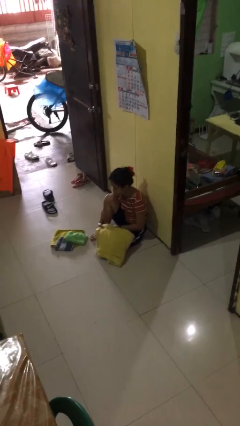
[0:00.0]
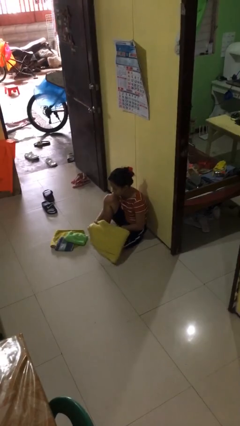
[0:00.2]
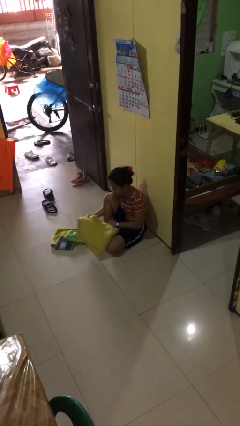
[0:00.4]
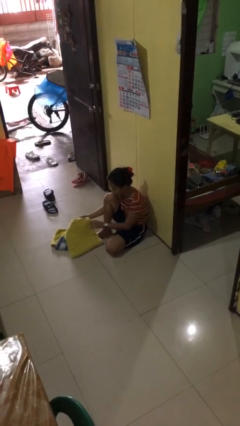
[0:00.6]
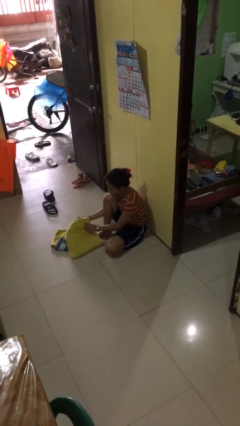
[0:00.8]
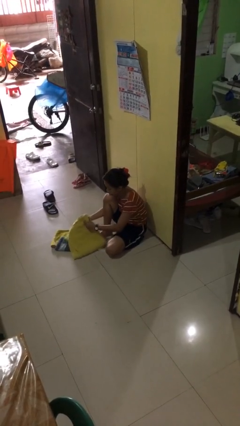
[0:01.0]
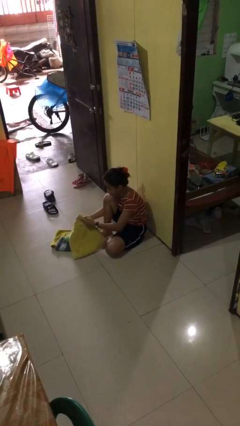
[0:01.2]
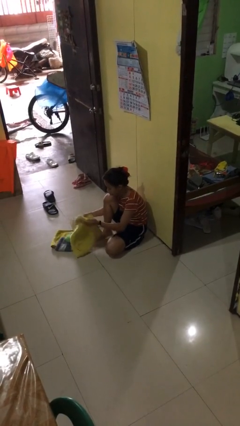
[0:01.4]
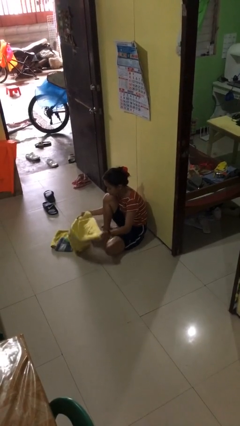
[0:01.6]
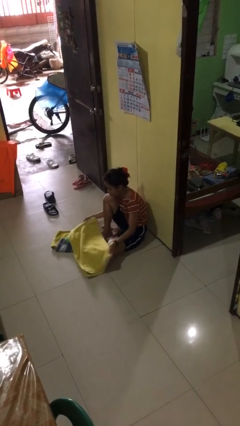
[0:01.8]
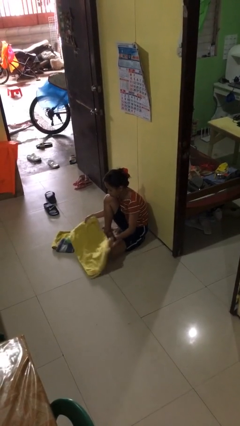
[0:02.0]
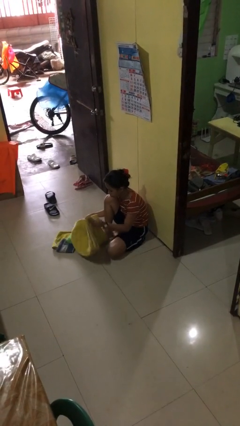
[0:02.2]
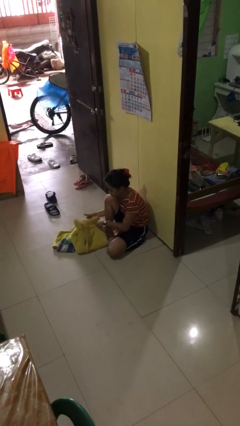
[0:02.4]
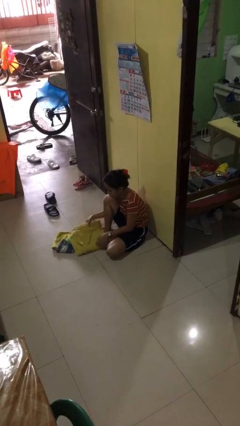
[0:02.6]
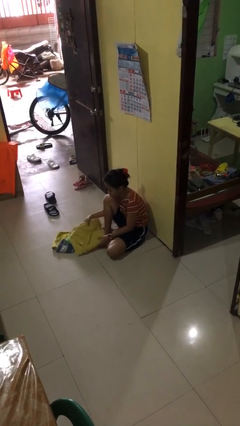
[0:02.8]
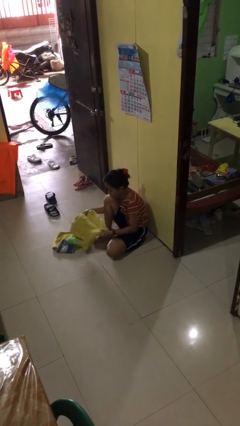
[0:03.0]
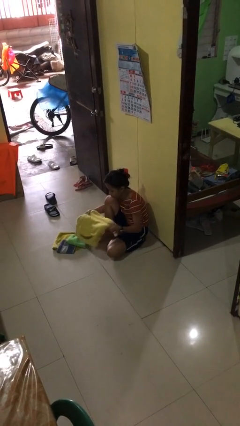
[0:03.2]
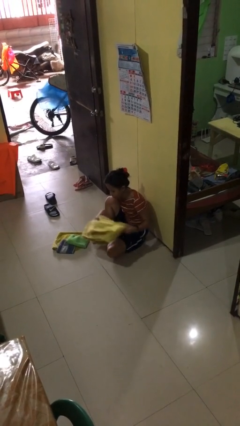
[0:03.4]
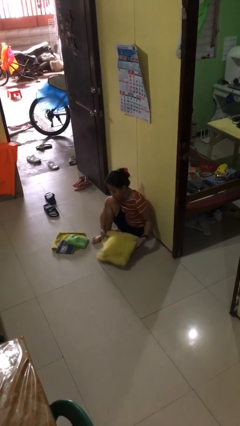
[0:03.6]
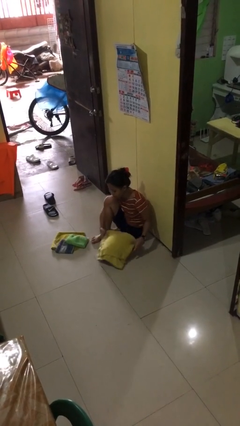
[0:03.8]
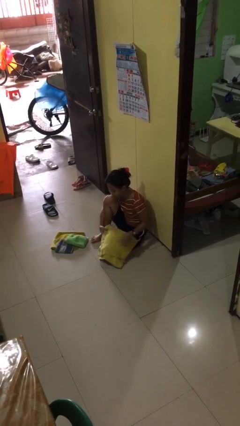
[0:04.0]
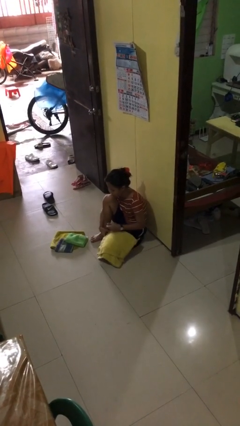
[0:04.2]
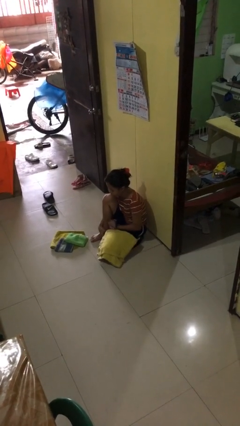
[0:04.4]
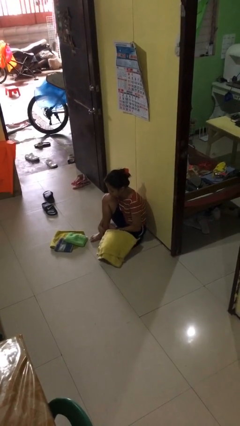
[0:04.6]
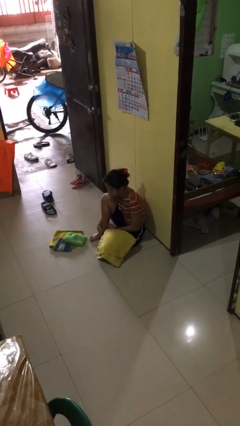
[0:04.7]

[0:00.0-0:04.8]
person folds towel

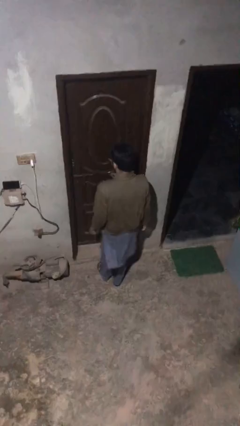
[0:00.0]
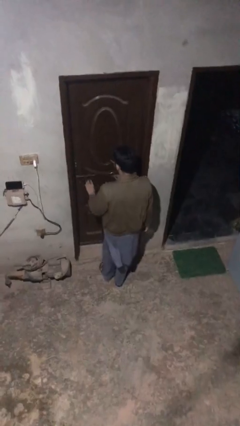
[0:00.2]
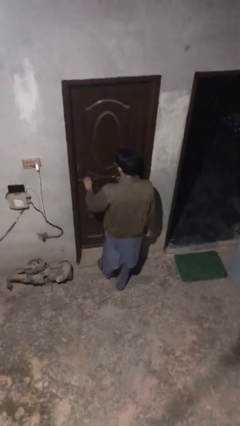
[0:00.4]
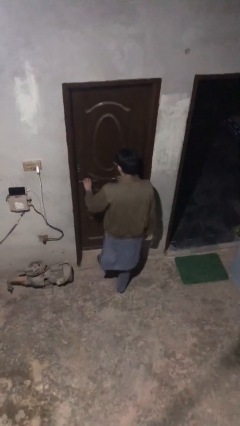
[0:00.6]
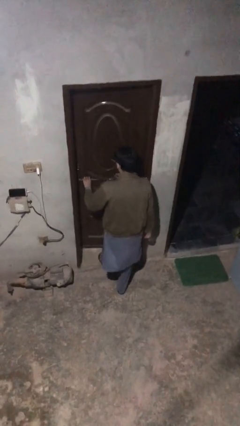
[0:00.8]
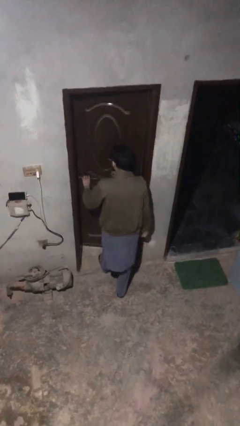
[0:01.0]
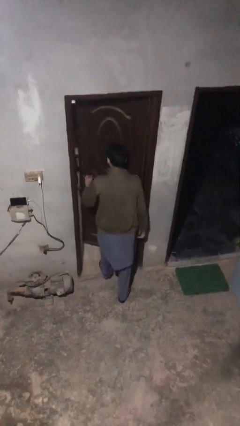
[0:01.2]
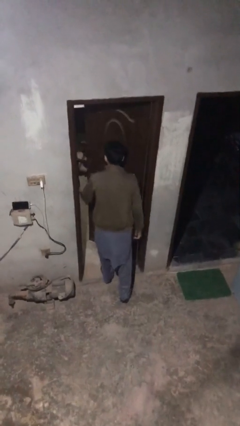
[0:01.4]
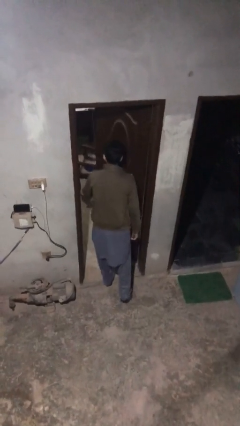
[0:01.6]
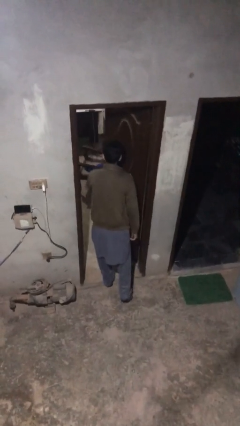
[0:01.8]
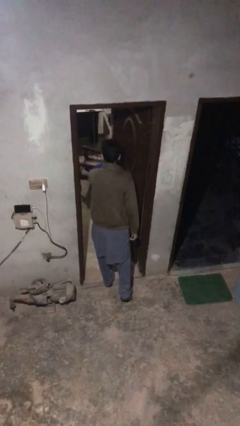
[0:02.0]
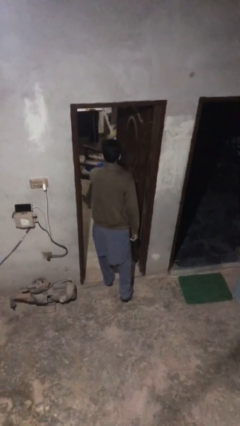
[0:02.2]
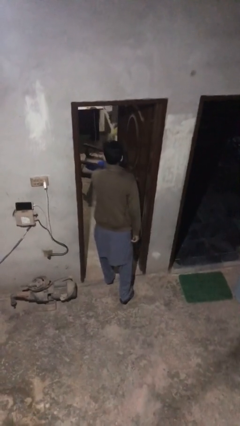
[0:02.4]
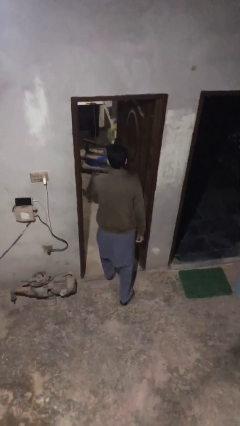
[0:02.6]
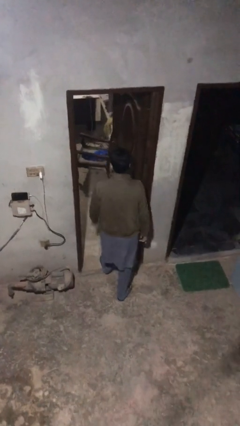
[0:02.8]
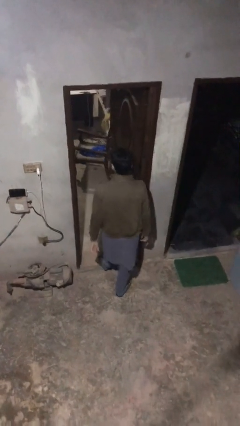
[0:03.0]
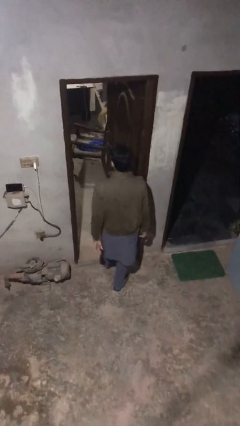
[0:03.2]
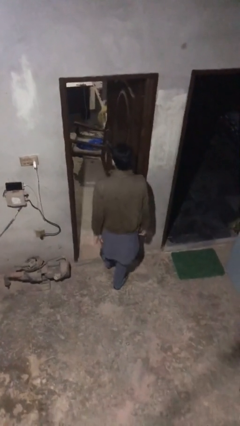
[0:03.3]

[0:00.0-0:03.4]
person opens facility door

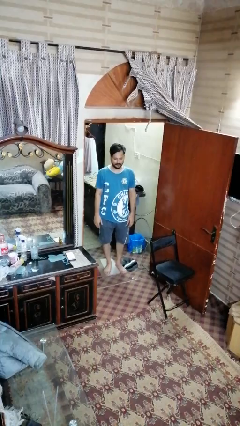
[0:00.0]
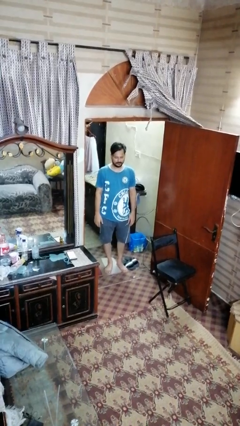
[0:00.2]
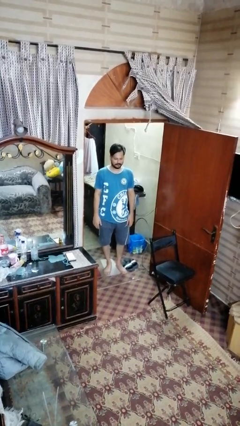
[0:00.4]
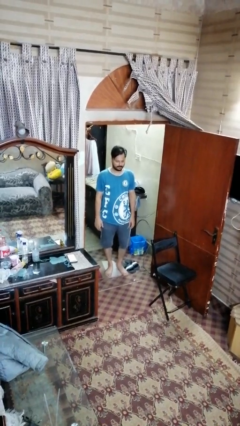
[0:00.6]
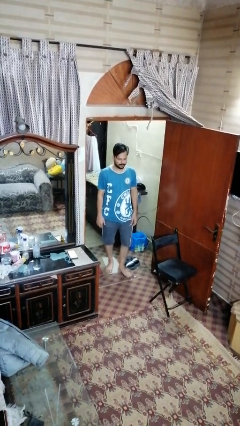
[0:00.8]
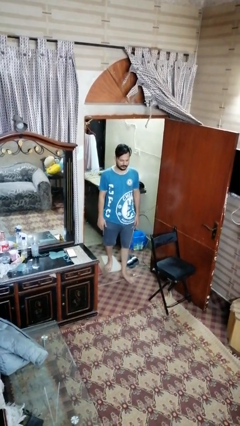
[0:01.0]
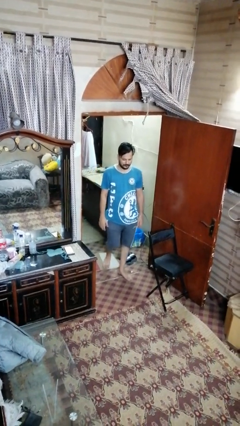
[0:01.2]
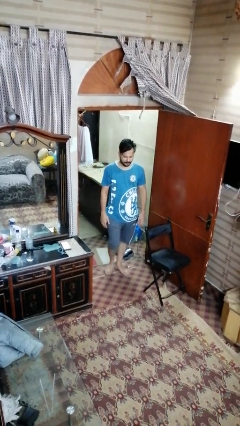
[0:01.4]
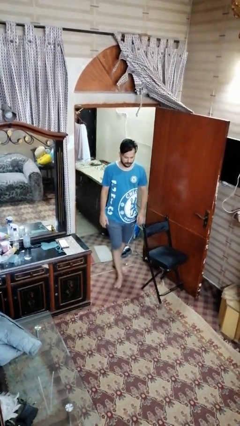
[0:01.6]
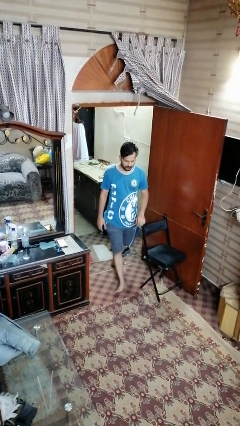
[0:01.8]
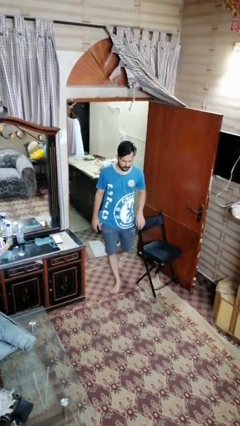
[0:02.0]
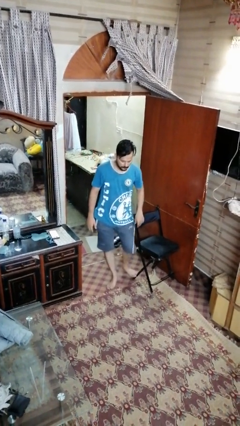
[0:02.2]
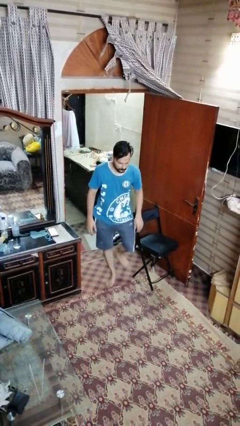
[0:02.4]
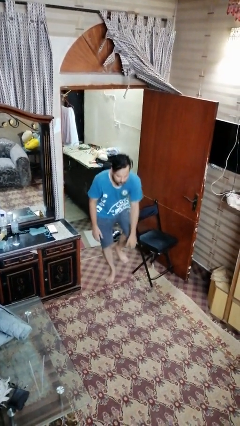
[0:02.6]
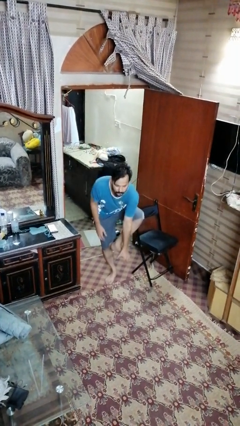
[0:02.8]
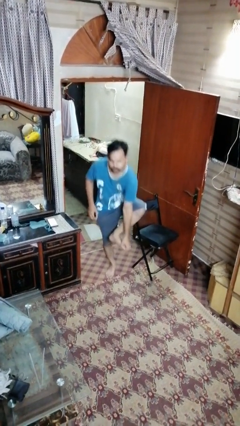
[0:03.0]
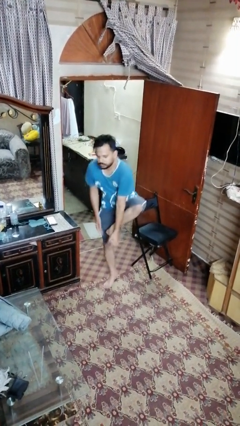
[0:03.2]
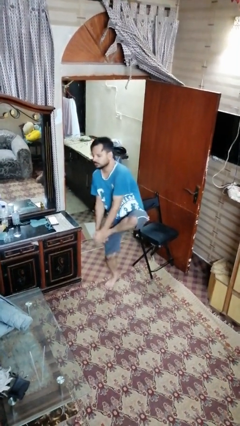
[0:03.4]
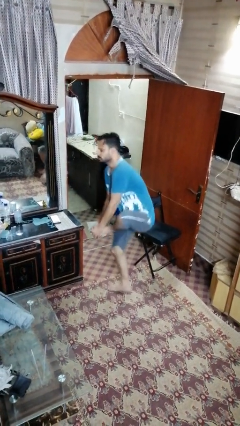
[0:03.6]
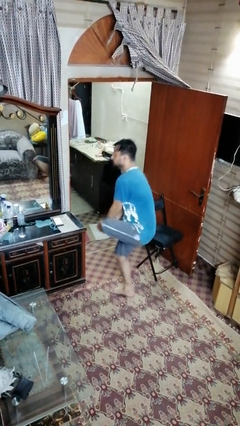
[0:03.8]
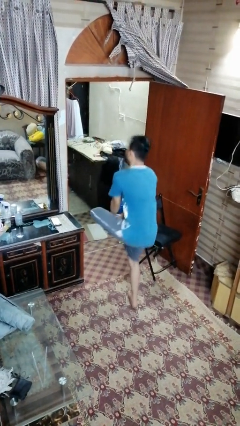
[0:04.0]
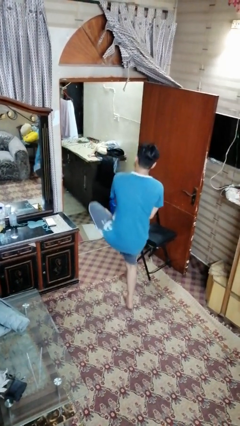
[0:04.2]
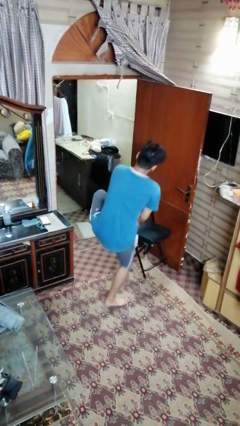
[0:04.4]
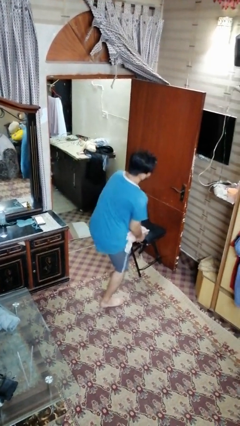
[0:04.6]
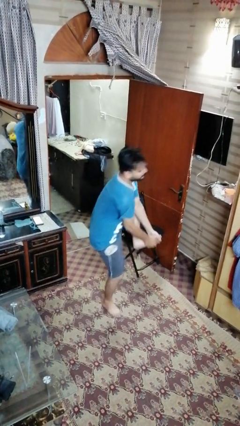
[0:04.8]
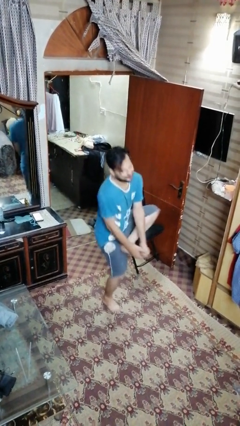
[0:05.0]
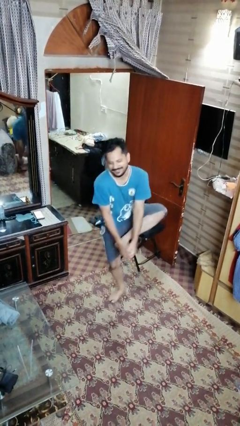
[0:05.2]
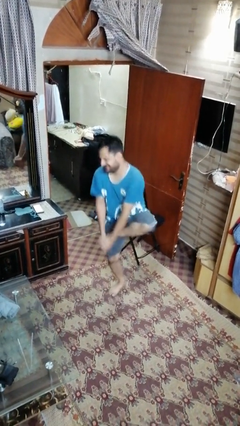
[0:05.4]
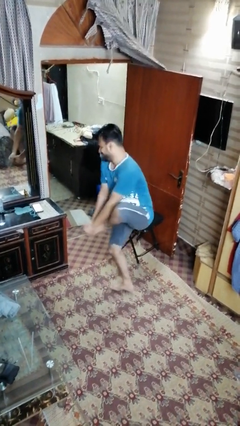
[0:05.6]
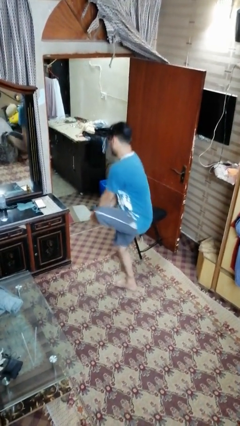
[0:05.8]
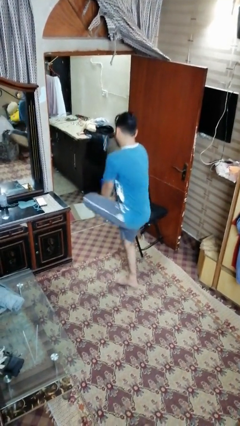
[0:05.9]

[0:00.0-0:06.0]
person trips on object on floor

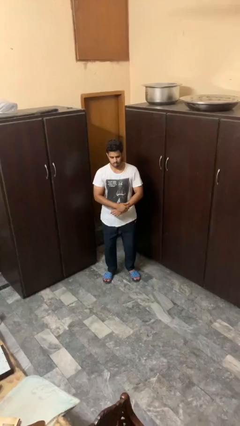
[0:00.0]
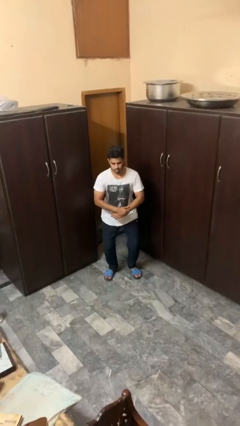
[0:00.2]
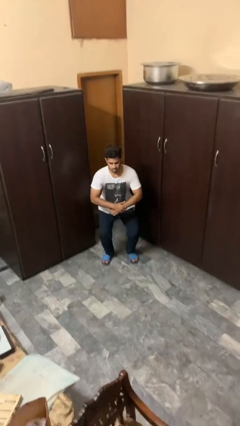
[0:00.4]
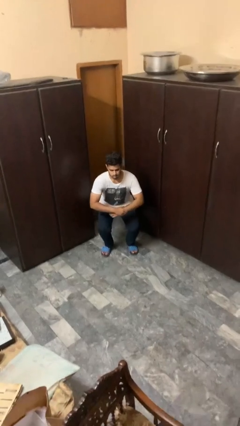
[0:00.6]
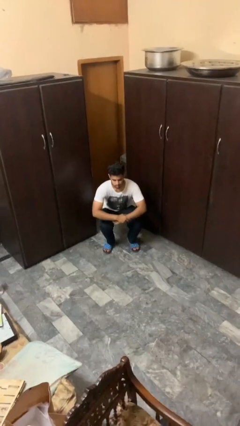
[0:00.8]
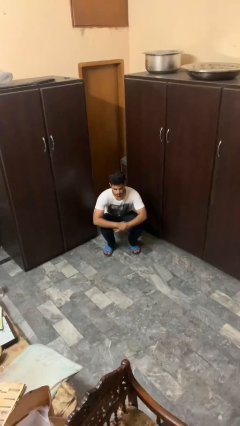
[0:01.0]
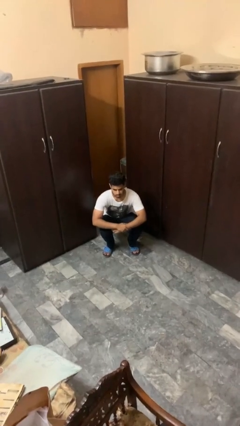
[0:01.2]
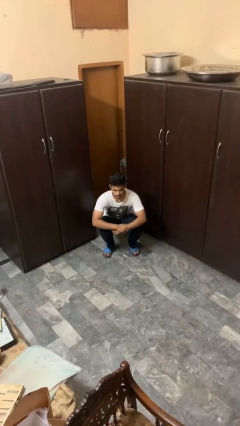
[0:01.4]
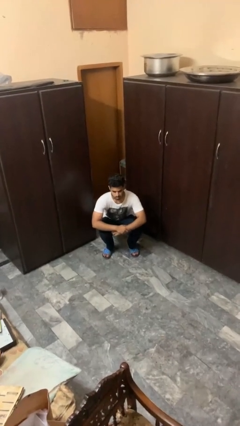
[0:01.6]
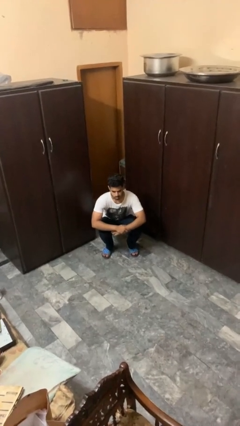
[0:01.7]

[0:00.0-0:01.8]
person squats

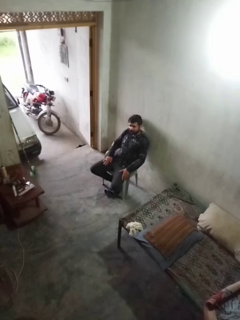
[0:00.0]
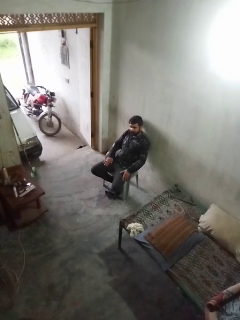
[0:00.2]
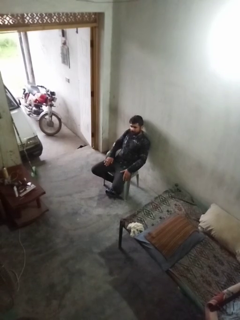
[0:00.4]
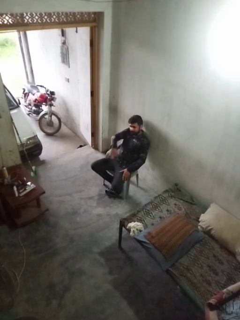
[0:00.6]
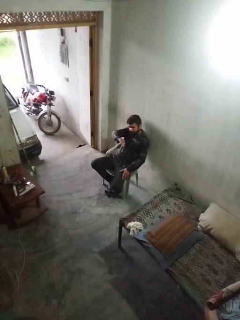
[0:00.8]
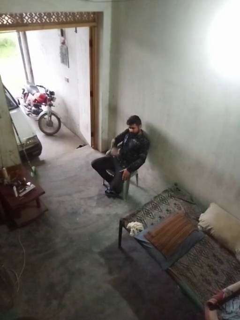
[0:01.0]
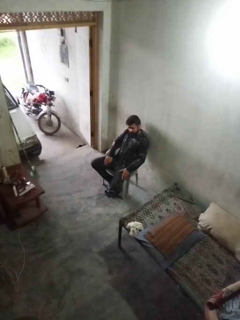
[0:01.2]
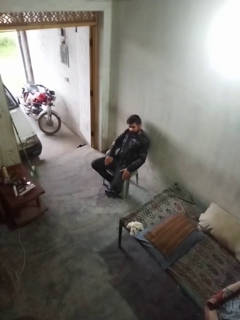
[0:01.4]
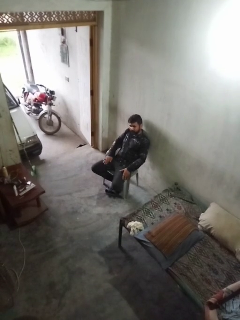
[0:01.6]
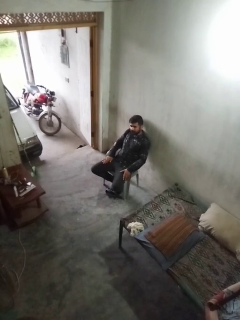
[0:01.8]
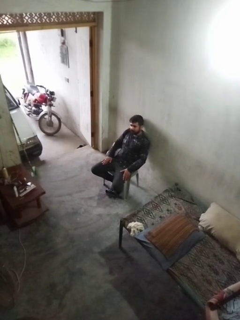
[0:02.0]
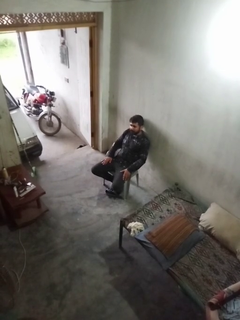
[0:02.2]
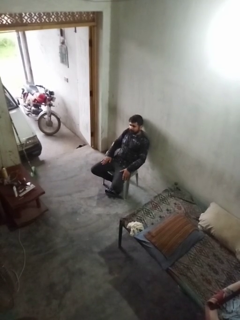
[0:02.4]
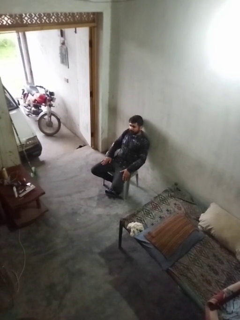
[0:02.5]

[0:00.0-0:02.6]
person slaps hands on thighs
